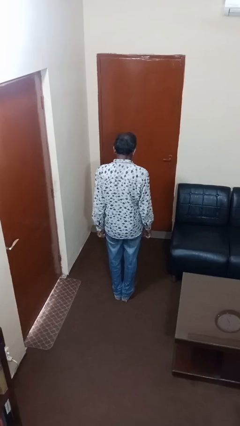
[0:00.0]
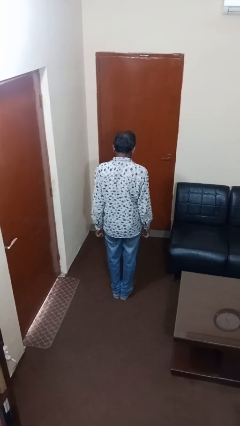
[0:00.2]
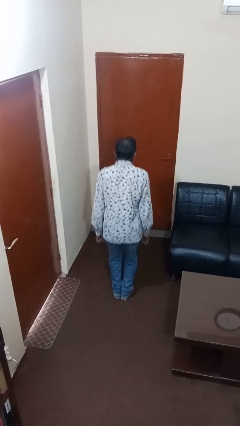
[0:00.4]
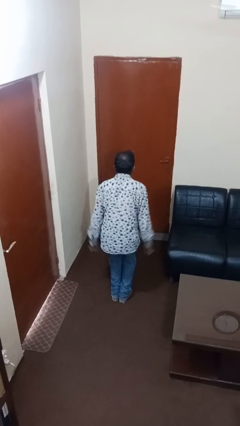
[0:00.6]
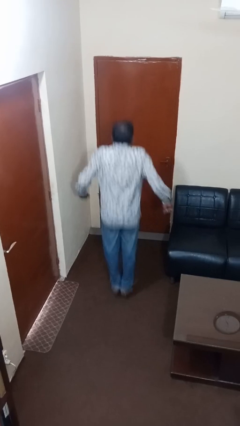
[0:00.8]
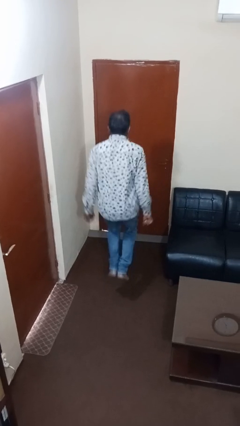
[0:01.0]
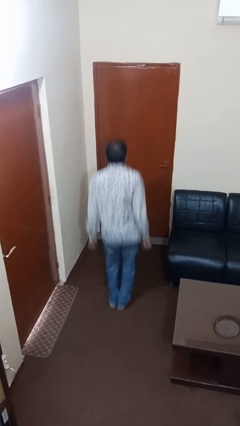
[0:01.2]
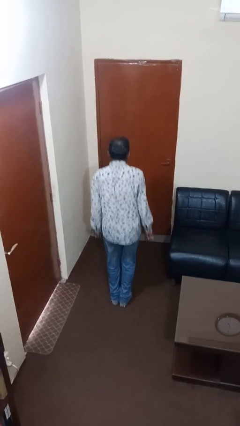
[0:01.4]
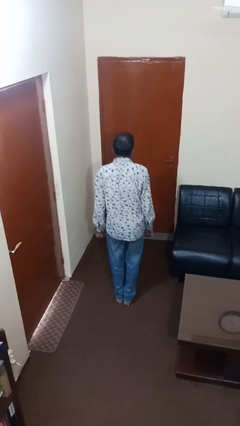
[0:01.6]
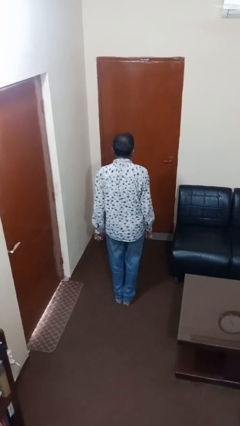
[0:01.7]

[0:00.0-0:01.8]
person jumps

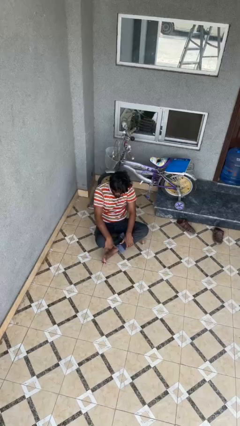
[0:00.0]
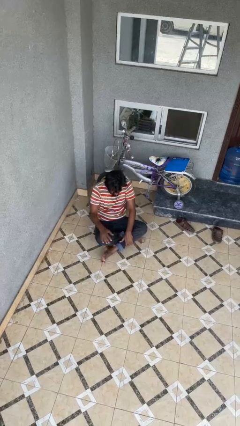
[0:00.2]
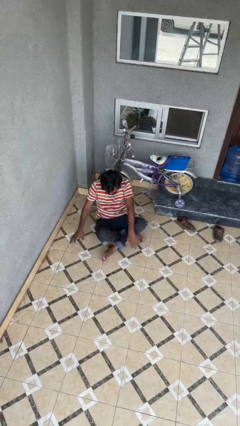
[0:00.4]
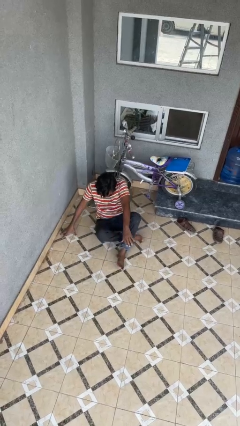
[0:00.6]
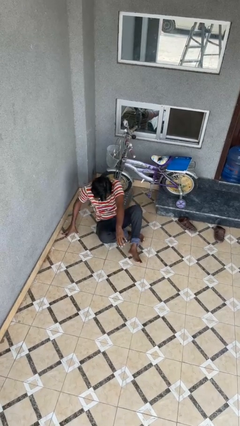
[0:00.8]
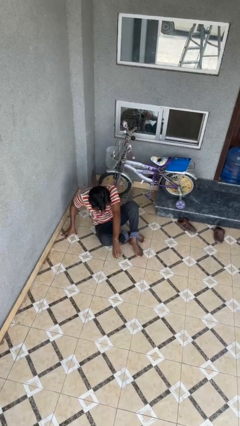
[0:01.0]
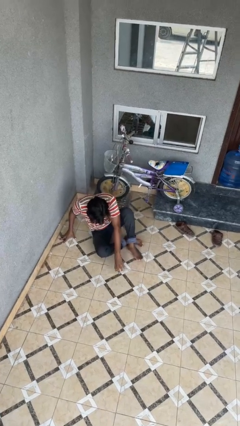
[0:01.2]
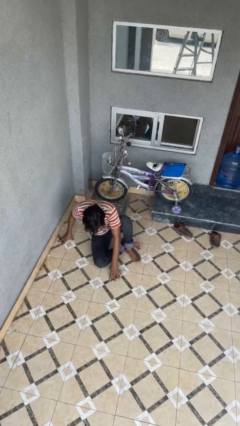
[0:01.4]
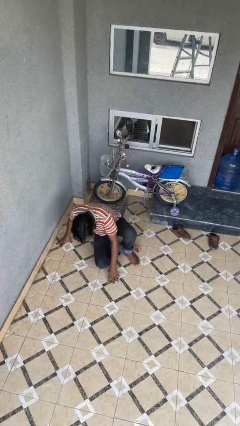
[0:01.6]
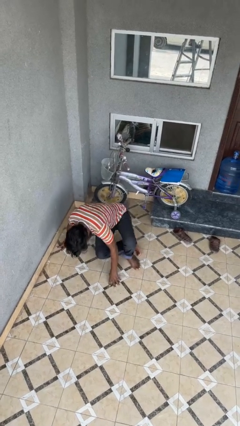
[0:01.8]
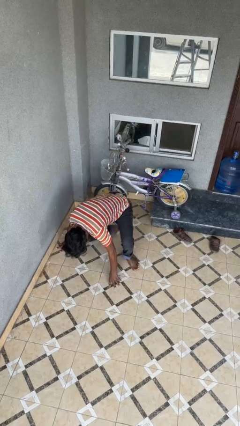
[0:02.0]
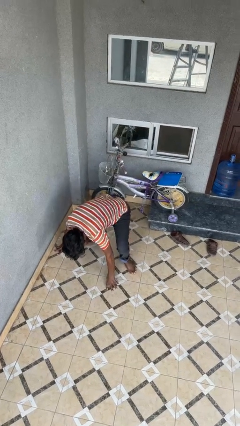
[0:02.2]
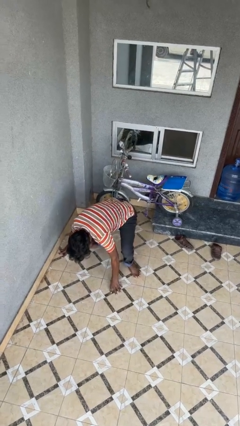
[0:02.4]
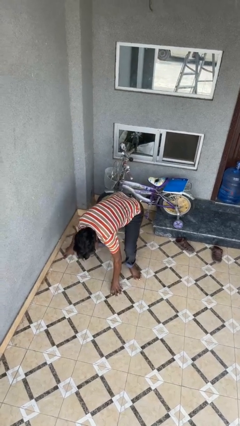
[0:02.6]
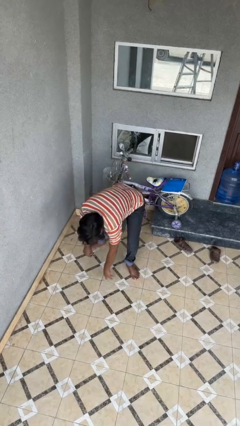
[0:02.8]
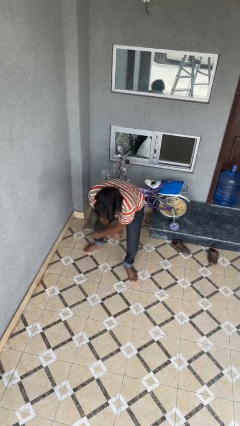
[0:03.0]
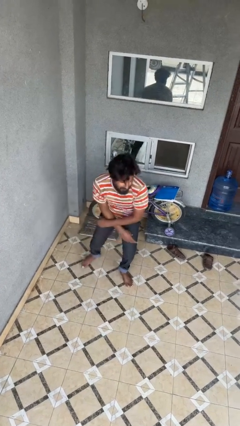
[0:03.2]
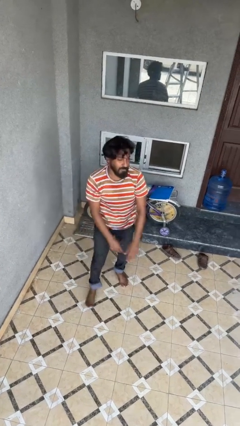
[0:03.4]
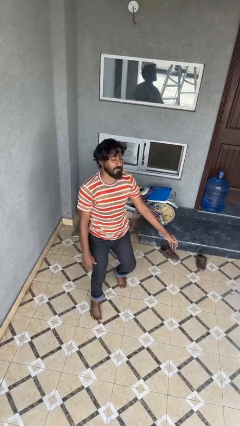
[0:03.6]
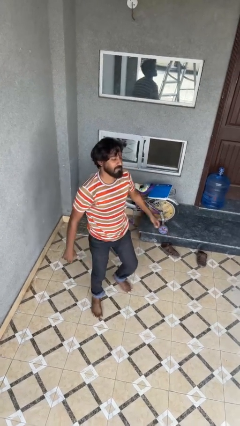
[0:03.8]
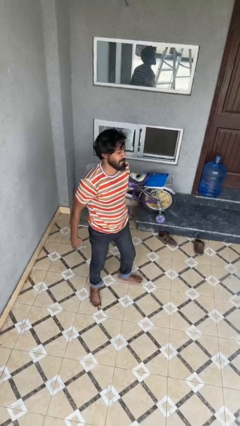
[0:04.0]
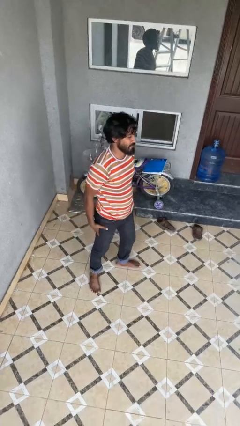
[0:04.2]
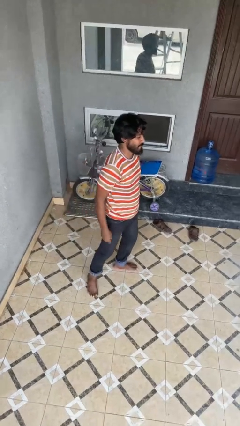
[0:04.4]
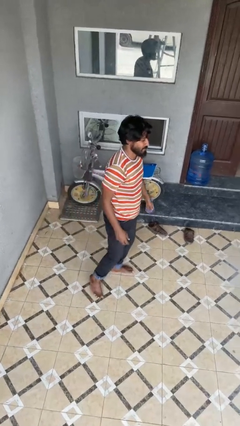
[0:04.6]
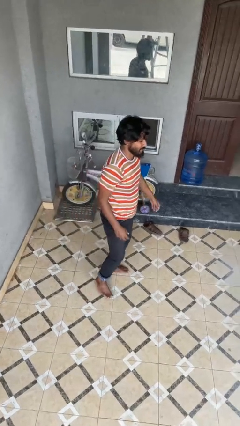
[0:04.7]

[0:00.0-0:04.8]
person stands up from floor

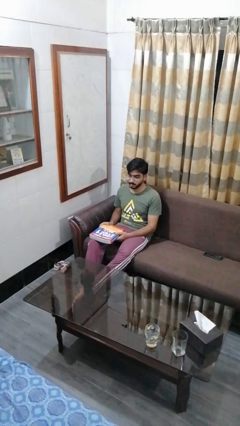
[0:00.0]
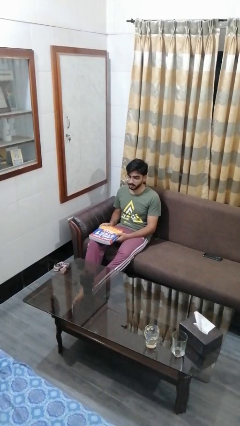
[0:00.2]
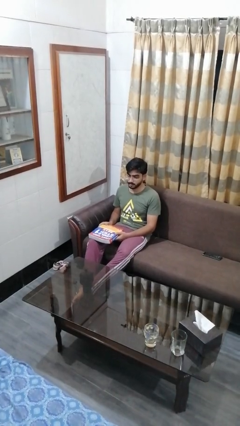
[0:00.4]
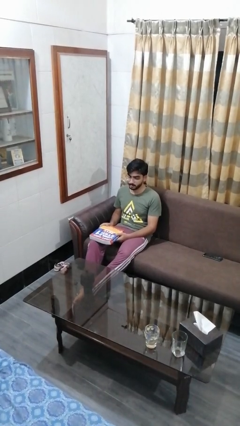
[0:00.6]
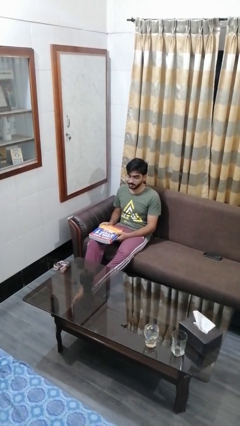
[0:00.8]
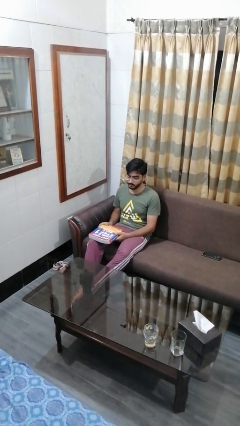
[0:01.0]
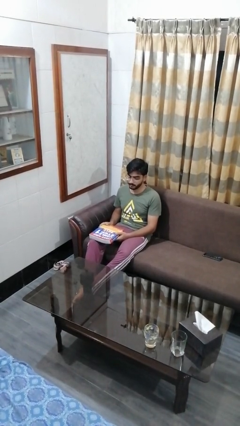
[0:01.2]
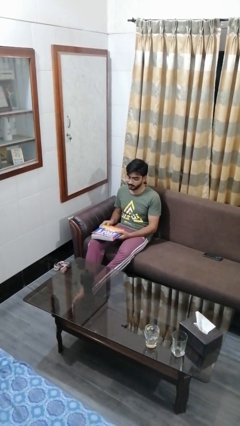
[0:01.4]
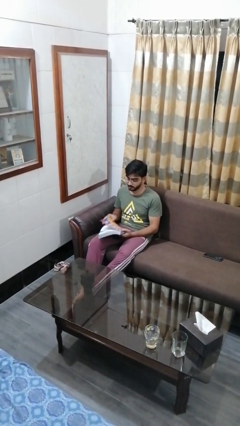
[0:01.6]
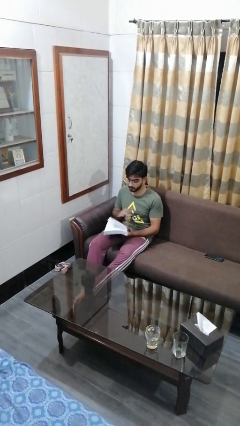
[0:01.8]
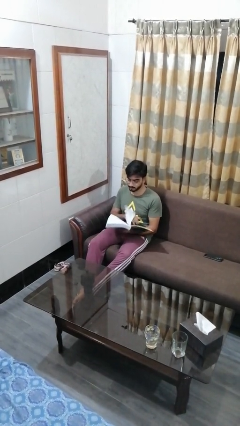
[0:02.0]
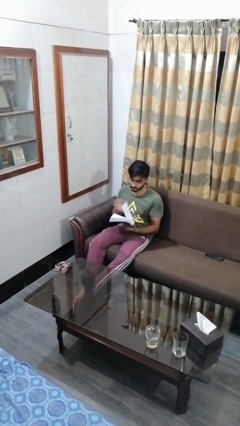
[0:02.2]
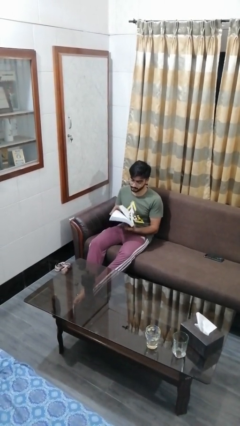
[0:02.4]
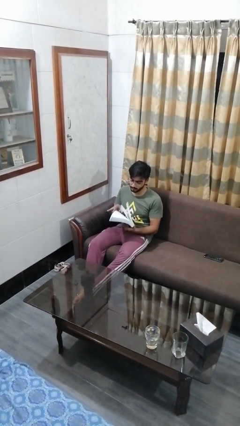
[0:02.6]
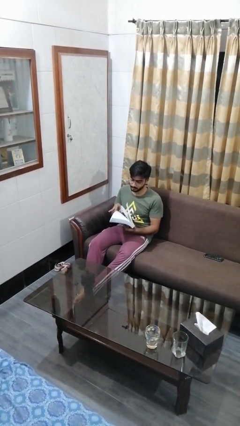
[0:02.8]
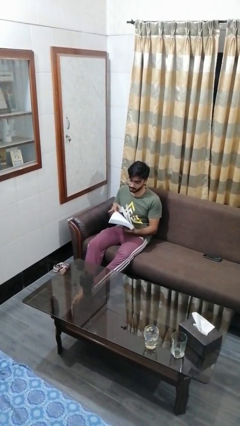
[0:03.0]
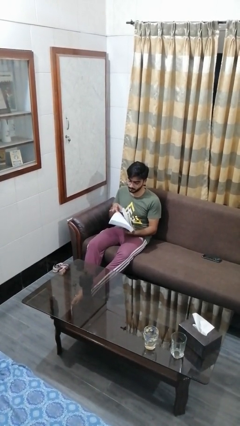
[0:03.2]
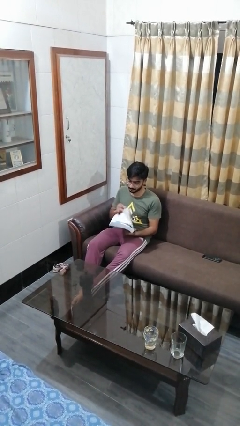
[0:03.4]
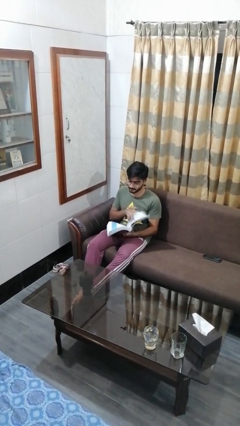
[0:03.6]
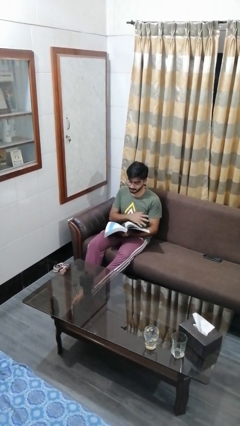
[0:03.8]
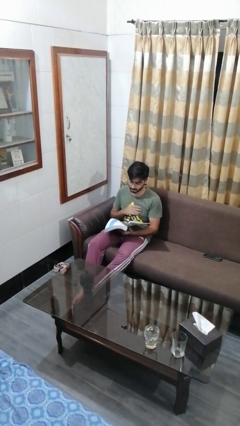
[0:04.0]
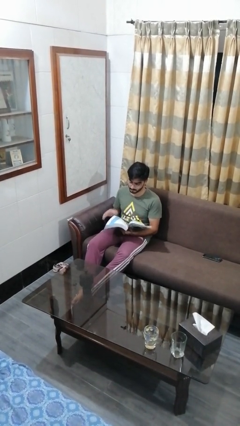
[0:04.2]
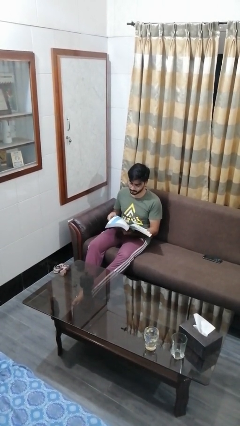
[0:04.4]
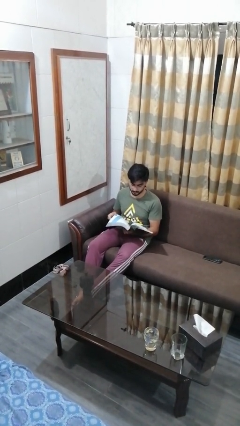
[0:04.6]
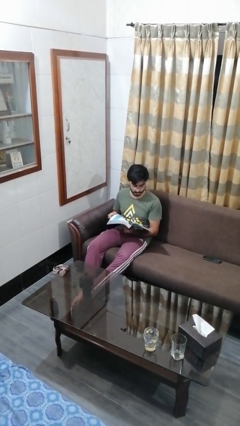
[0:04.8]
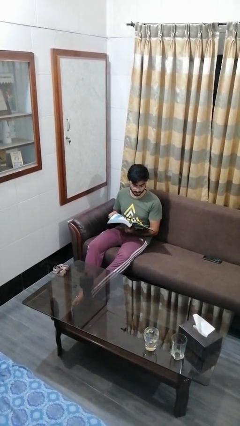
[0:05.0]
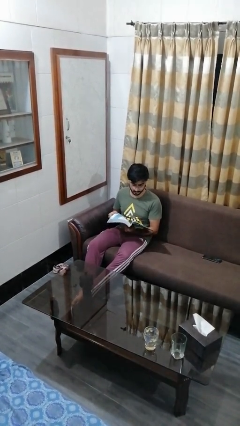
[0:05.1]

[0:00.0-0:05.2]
person reads book

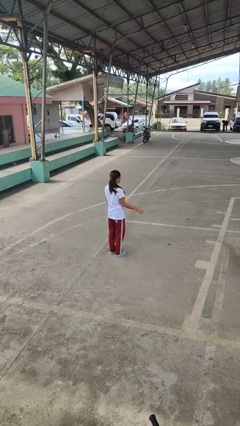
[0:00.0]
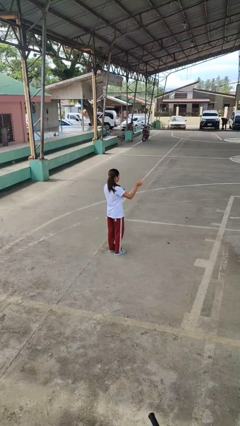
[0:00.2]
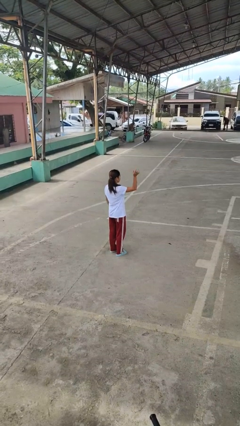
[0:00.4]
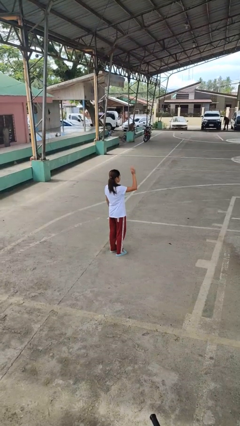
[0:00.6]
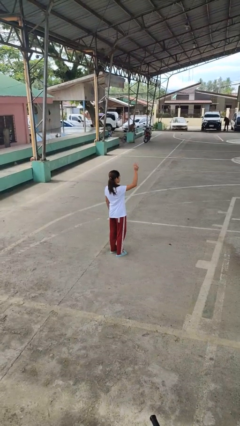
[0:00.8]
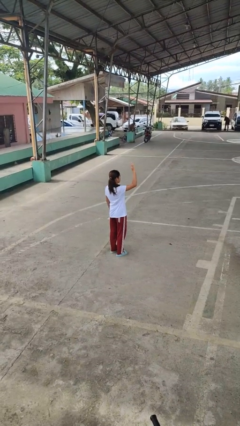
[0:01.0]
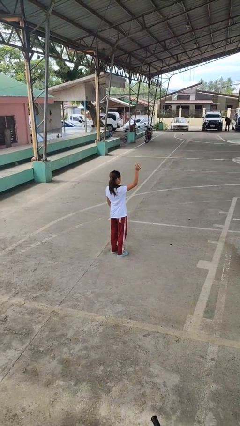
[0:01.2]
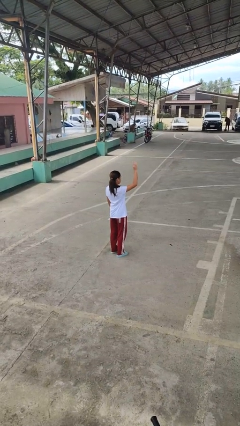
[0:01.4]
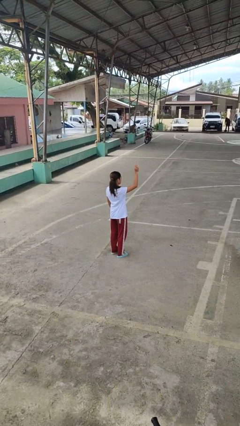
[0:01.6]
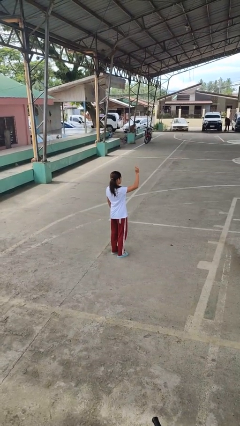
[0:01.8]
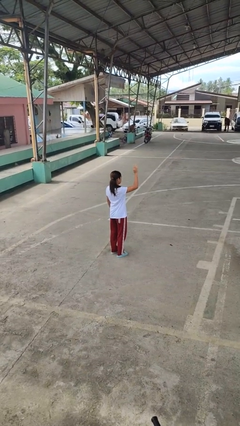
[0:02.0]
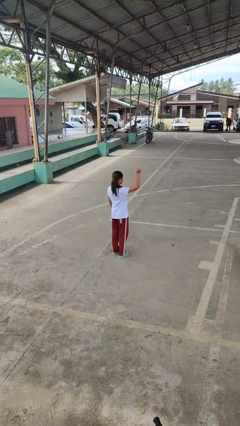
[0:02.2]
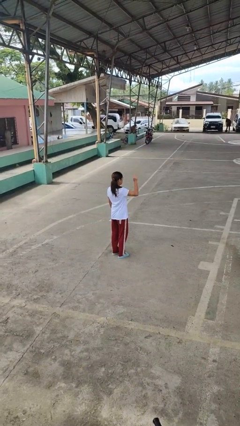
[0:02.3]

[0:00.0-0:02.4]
person waves at person

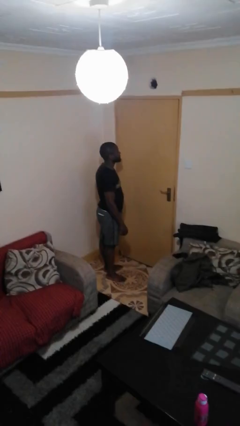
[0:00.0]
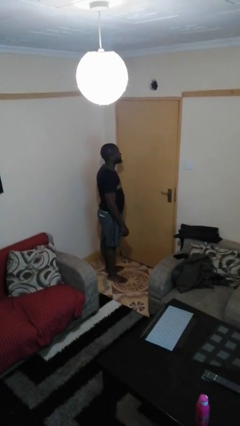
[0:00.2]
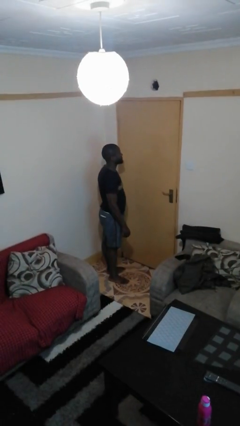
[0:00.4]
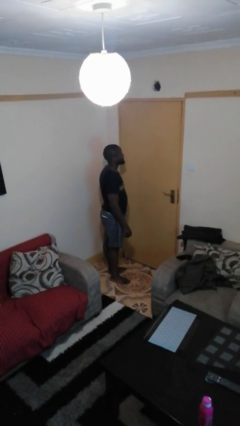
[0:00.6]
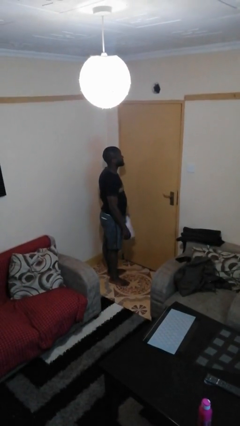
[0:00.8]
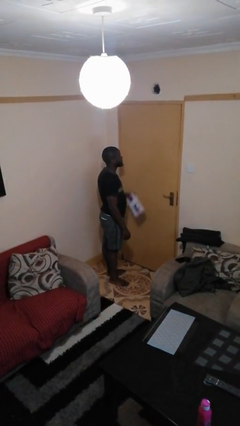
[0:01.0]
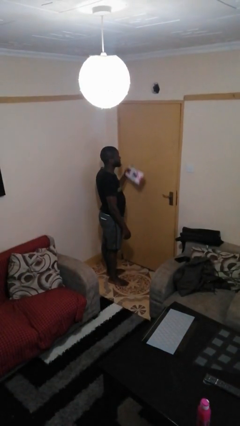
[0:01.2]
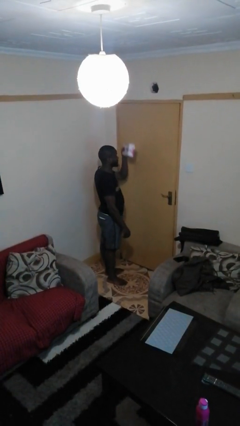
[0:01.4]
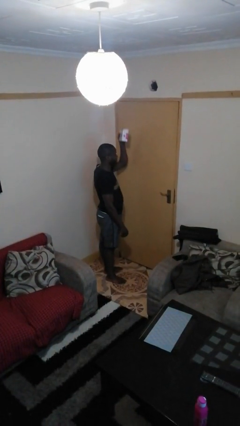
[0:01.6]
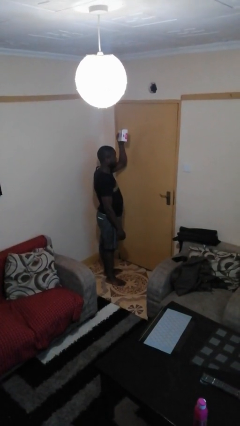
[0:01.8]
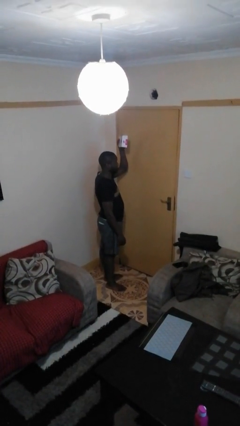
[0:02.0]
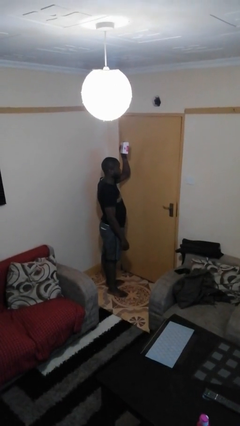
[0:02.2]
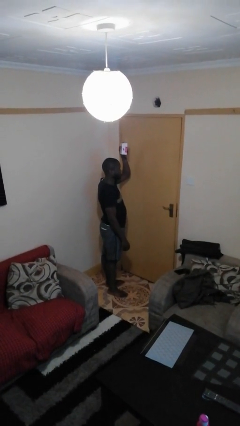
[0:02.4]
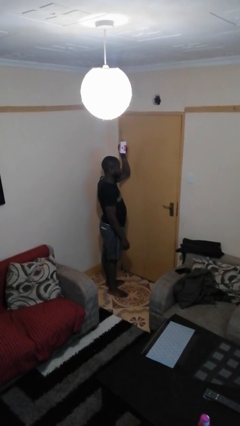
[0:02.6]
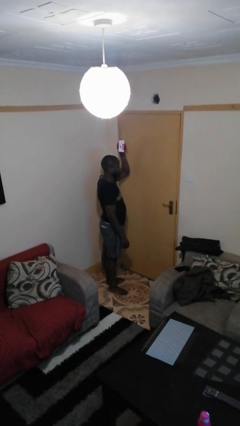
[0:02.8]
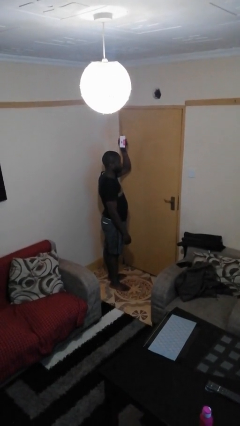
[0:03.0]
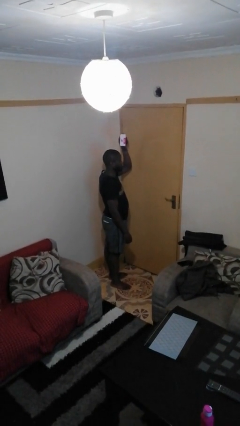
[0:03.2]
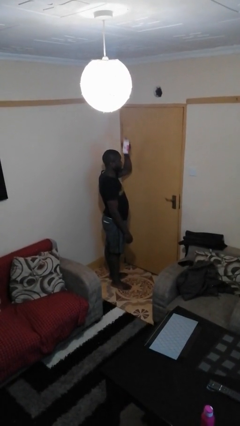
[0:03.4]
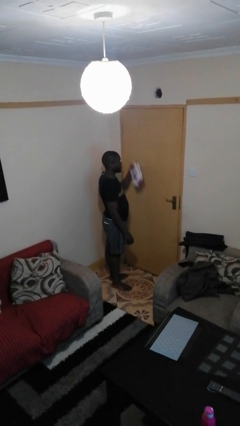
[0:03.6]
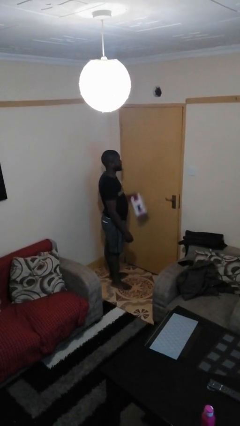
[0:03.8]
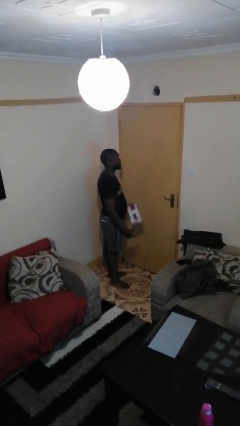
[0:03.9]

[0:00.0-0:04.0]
person holds object above head
